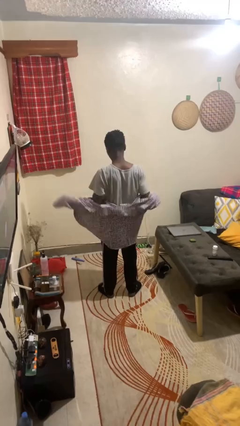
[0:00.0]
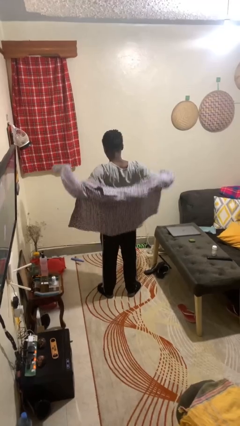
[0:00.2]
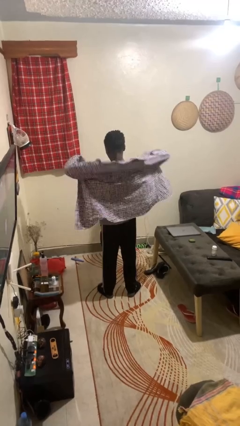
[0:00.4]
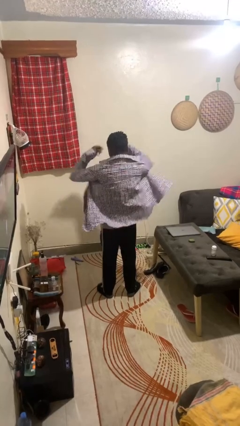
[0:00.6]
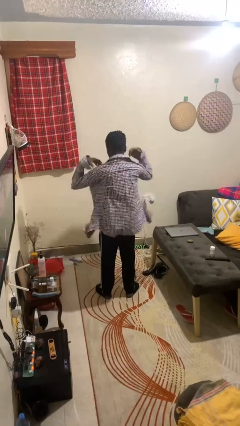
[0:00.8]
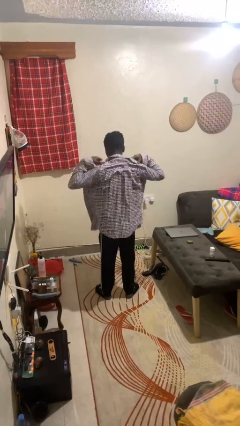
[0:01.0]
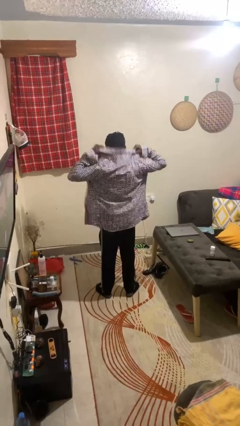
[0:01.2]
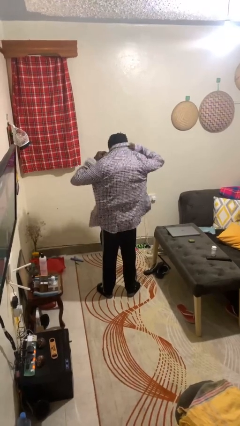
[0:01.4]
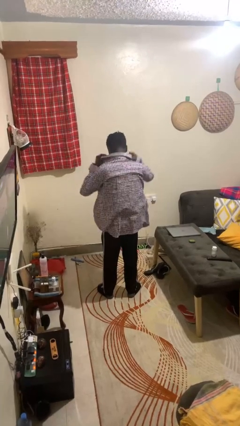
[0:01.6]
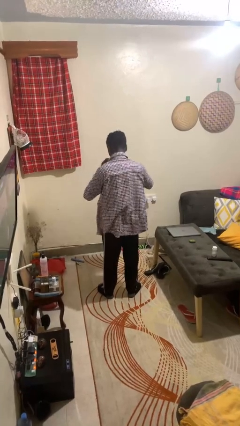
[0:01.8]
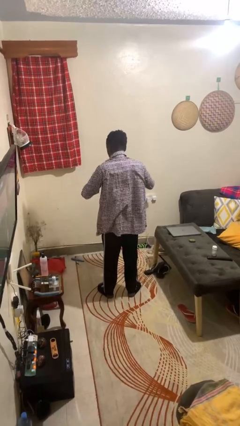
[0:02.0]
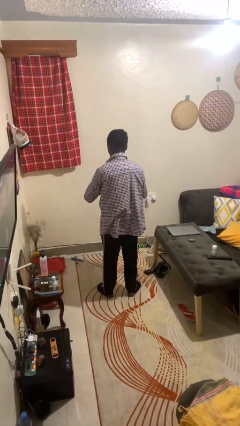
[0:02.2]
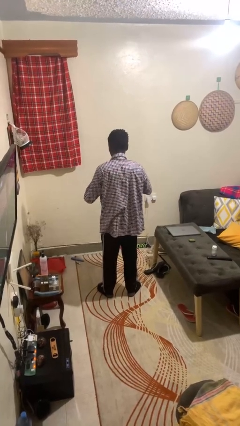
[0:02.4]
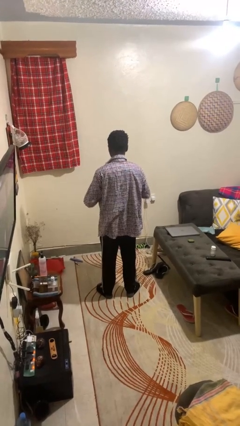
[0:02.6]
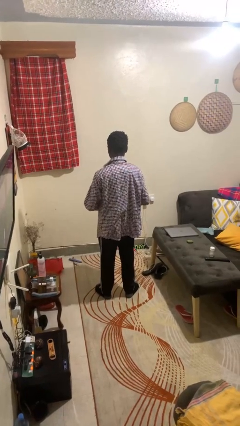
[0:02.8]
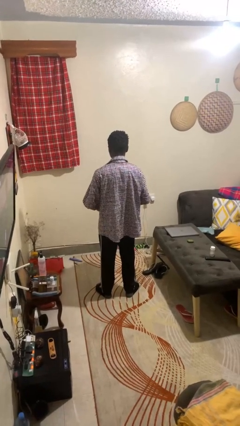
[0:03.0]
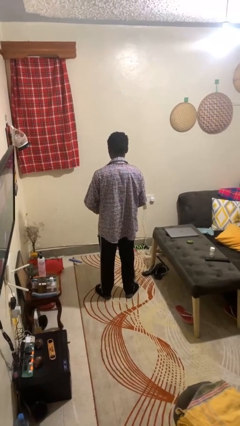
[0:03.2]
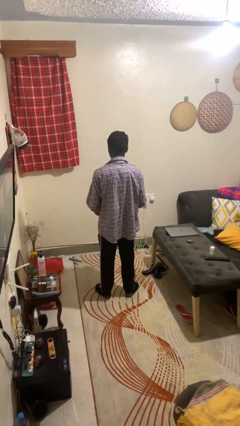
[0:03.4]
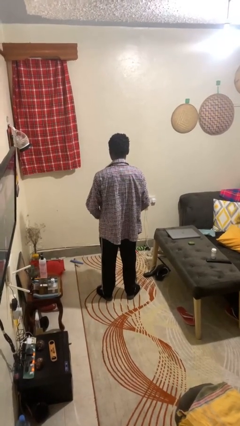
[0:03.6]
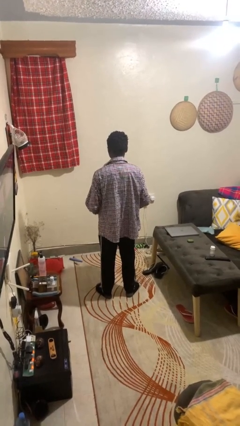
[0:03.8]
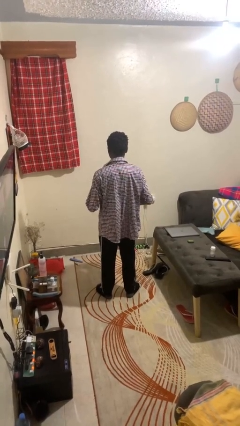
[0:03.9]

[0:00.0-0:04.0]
person puts on shirt

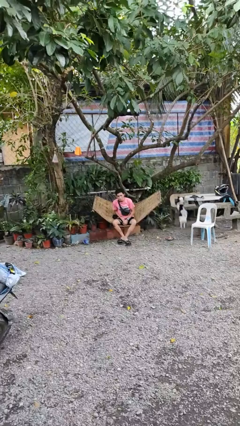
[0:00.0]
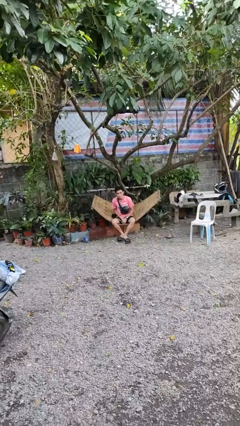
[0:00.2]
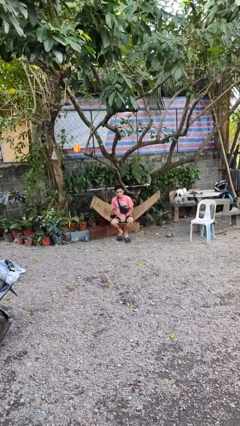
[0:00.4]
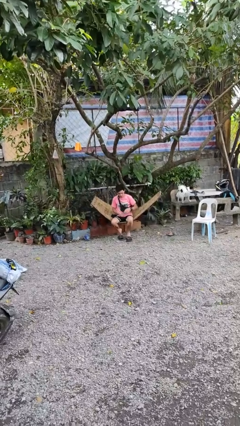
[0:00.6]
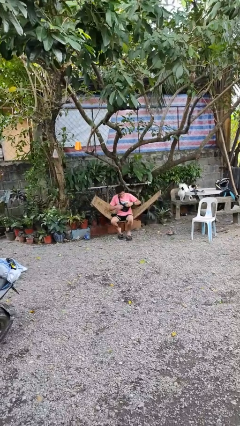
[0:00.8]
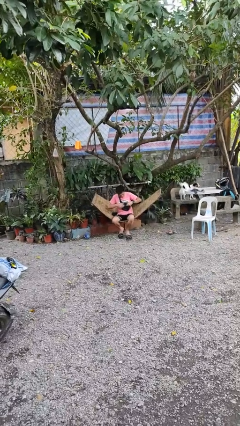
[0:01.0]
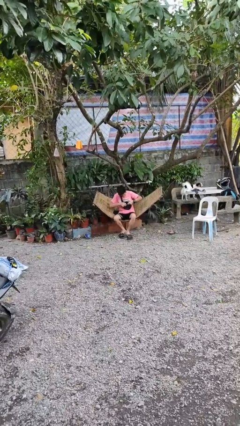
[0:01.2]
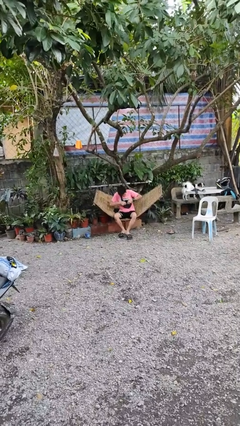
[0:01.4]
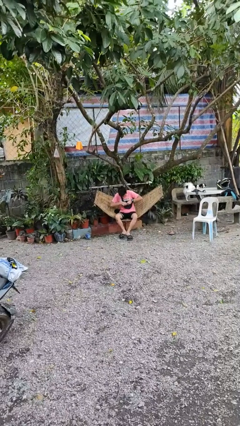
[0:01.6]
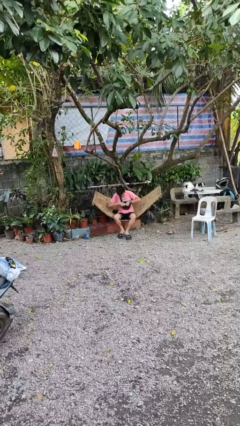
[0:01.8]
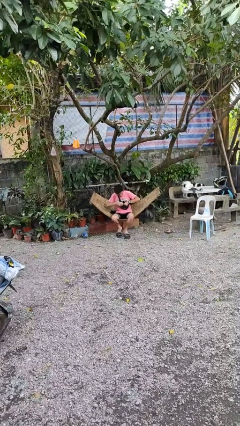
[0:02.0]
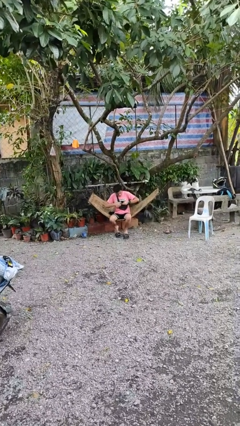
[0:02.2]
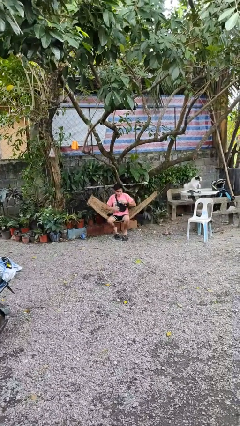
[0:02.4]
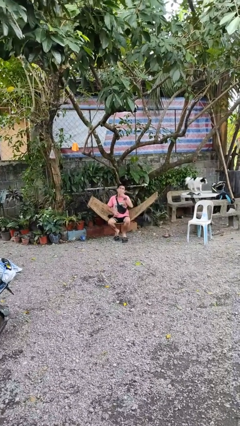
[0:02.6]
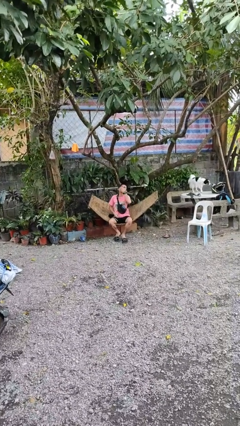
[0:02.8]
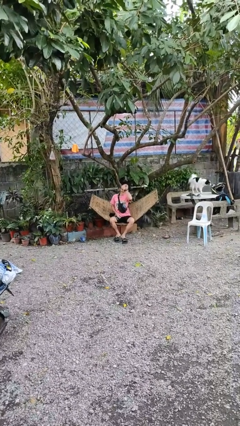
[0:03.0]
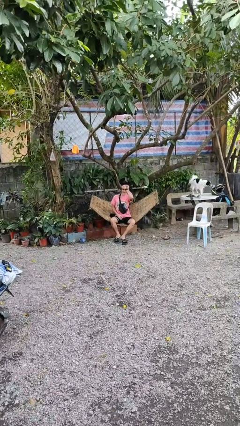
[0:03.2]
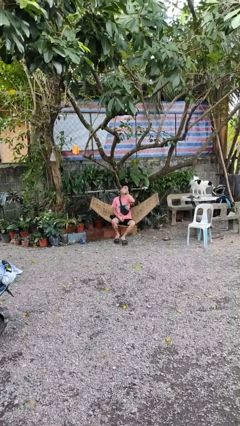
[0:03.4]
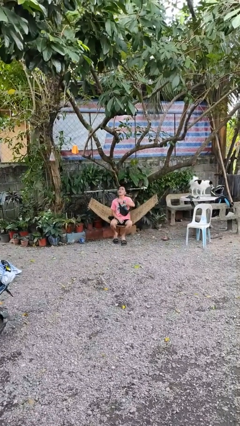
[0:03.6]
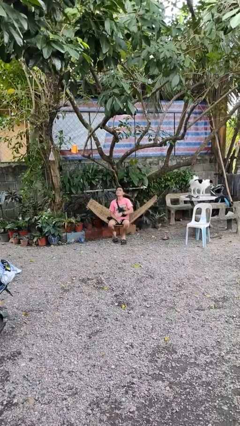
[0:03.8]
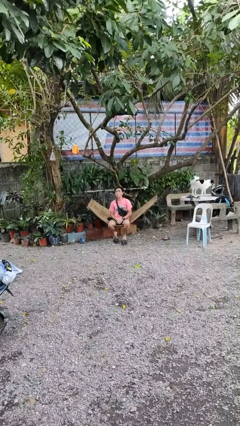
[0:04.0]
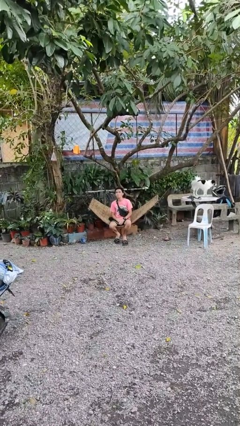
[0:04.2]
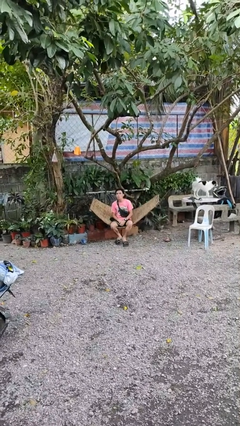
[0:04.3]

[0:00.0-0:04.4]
person eats snack from bag

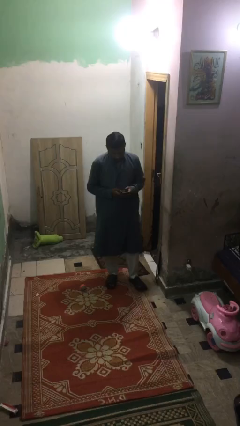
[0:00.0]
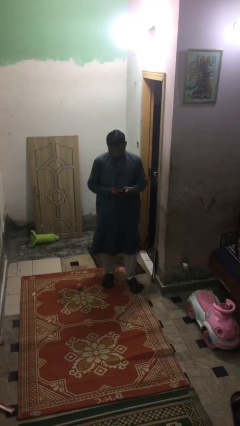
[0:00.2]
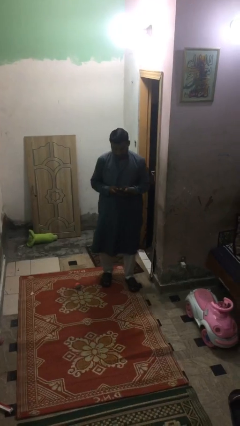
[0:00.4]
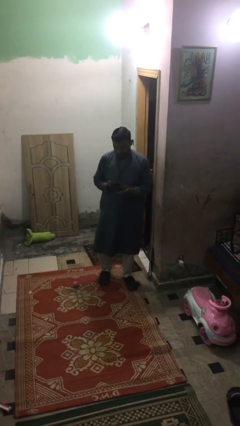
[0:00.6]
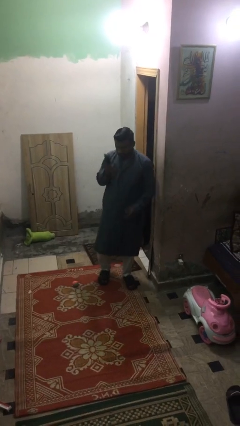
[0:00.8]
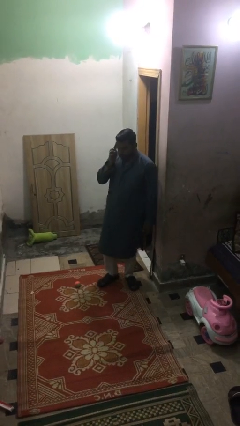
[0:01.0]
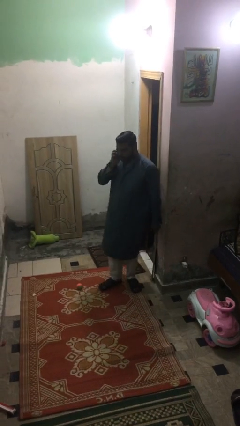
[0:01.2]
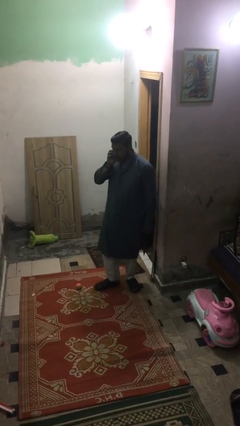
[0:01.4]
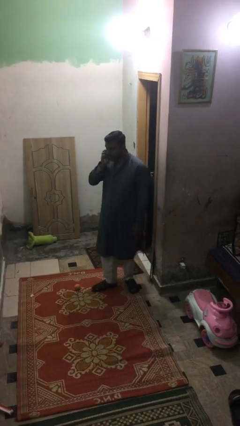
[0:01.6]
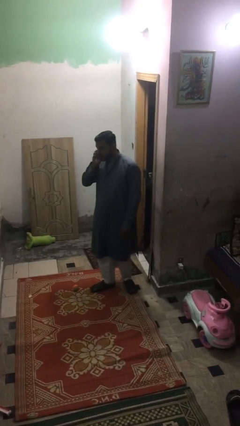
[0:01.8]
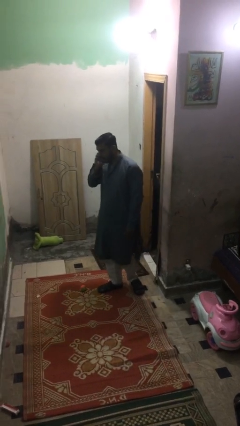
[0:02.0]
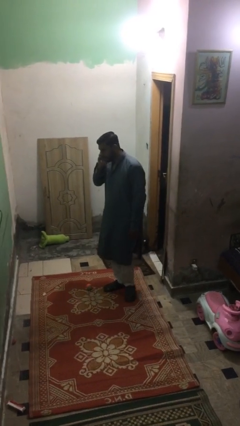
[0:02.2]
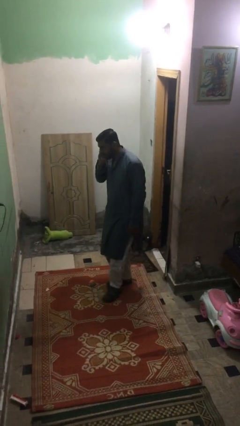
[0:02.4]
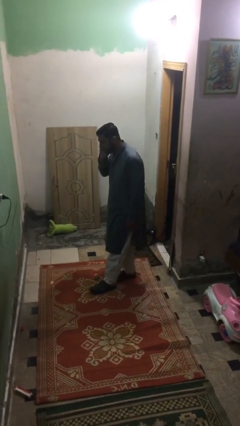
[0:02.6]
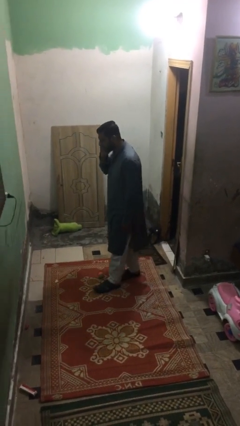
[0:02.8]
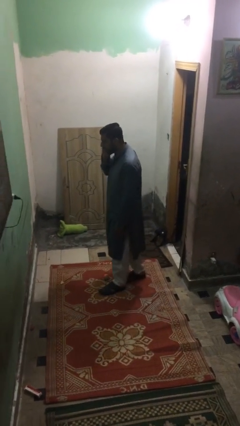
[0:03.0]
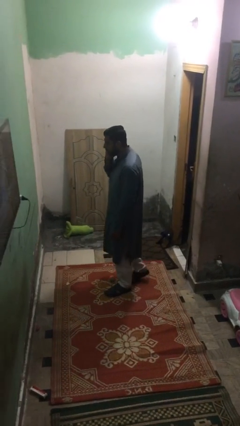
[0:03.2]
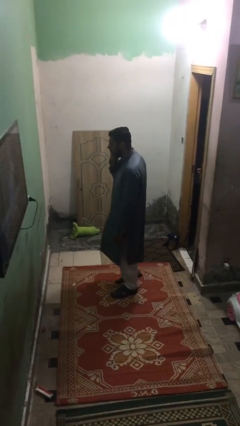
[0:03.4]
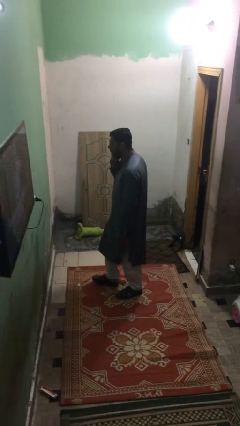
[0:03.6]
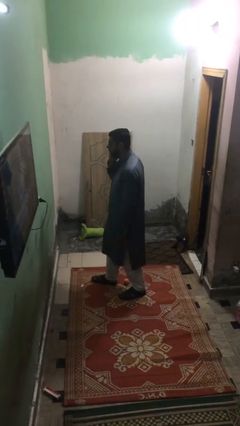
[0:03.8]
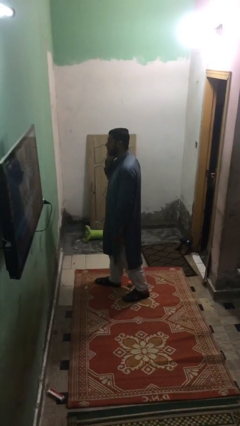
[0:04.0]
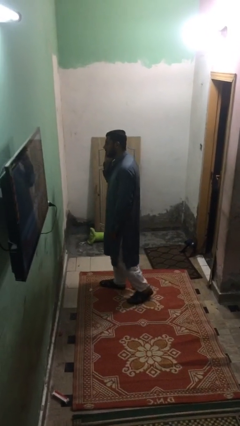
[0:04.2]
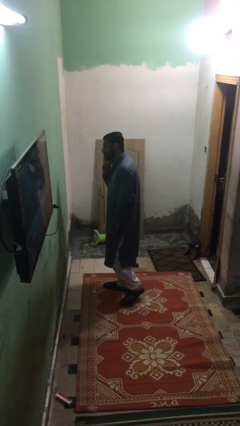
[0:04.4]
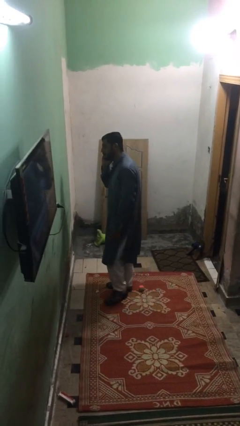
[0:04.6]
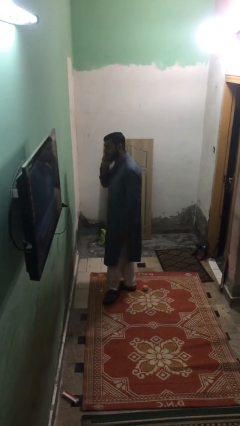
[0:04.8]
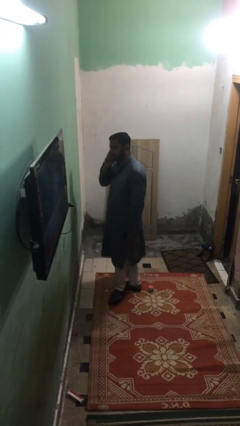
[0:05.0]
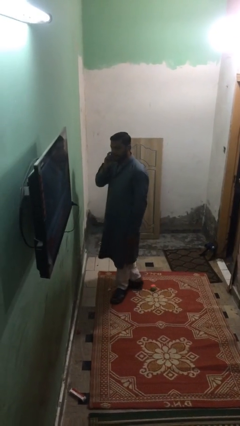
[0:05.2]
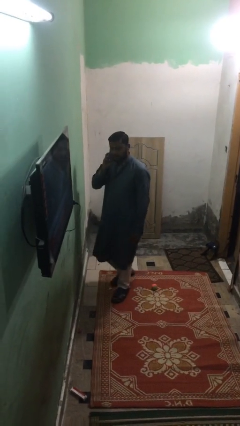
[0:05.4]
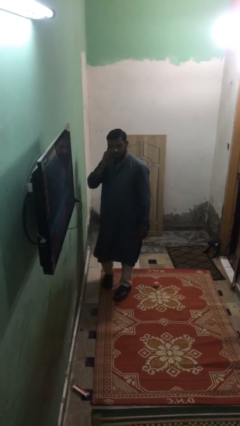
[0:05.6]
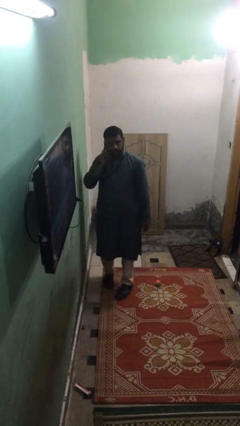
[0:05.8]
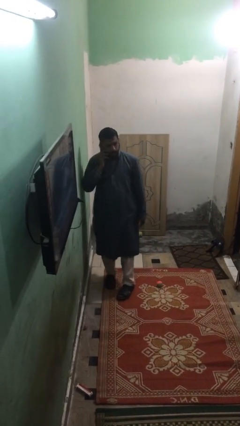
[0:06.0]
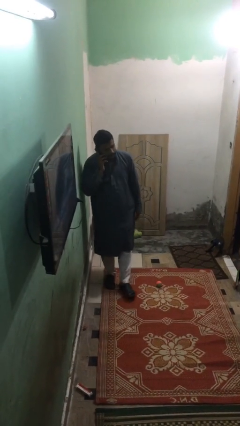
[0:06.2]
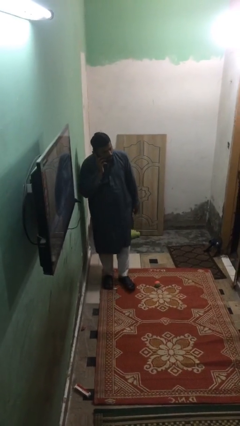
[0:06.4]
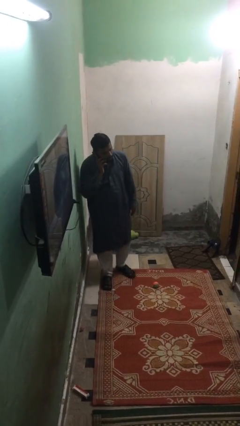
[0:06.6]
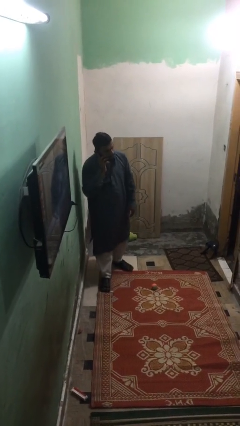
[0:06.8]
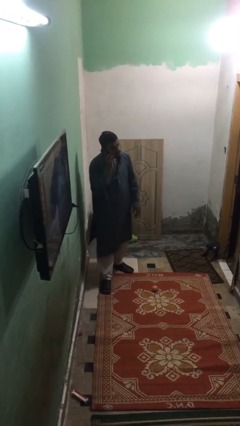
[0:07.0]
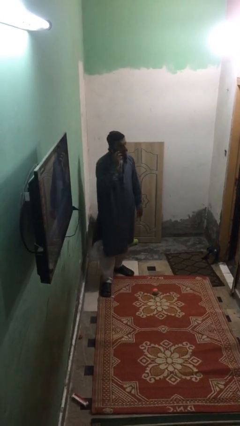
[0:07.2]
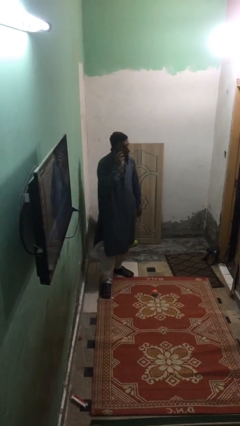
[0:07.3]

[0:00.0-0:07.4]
person talks on phone

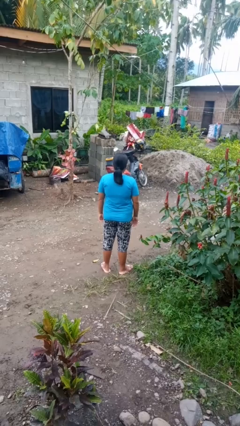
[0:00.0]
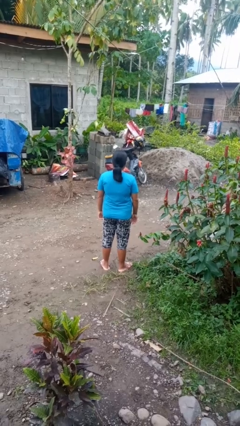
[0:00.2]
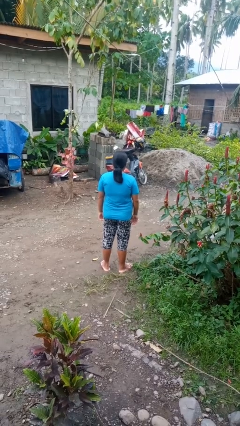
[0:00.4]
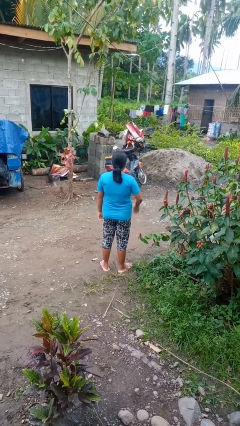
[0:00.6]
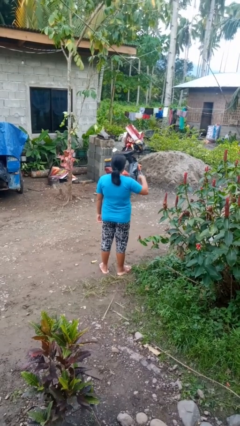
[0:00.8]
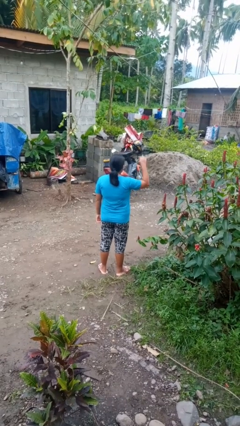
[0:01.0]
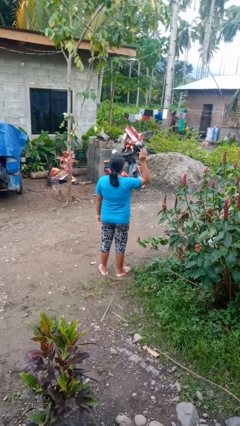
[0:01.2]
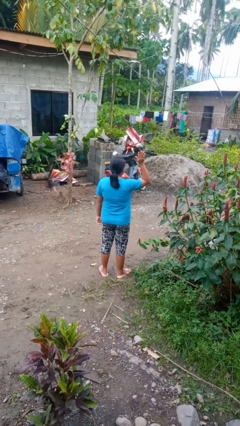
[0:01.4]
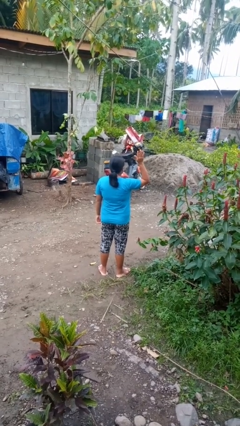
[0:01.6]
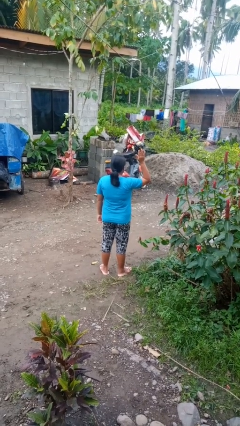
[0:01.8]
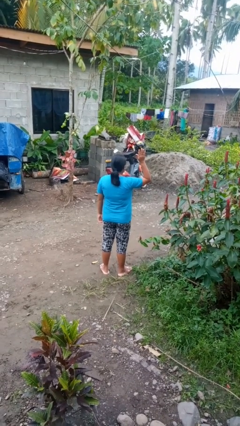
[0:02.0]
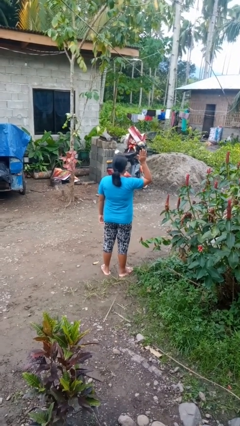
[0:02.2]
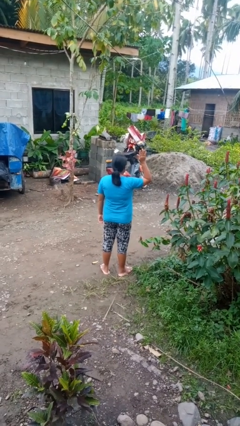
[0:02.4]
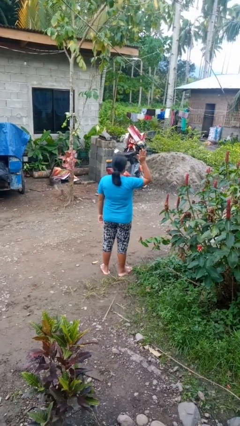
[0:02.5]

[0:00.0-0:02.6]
person gestures raise hand
